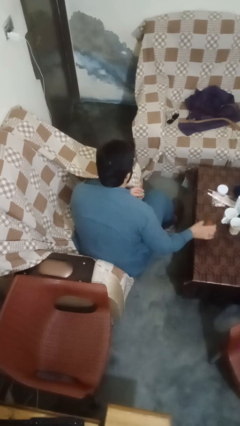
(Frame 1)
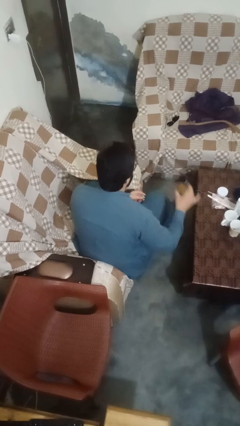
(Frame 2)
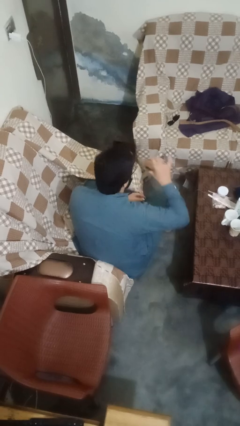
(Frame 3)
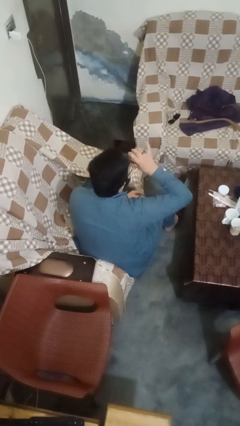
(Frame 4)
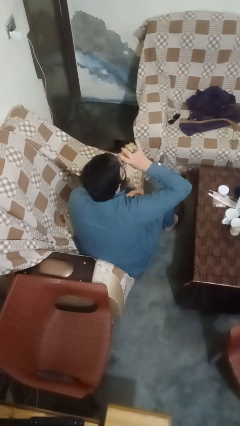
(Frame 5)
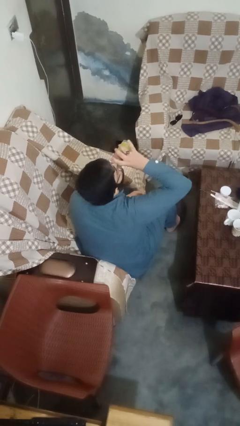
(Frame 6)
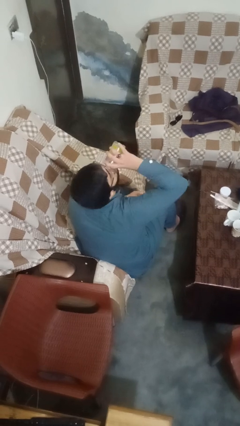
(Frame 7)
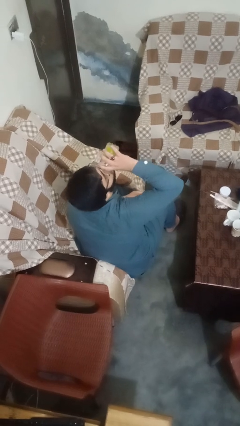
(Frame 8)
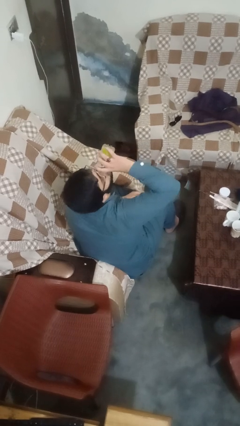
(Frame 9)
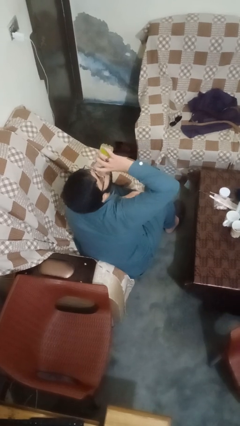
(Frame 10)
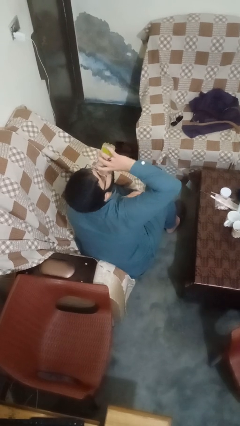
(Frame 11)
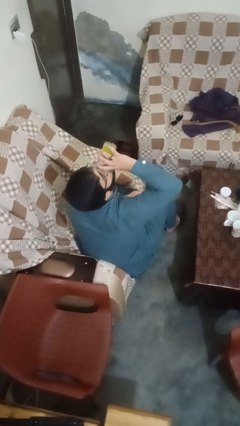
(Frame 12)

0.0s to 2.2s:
person drinks from cup

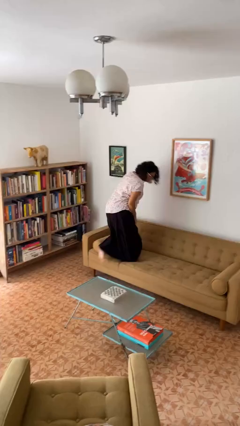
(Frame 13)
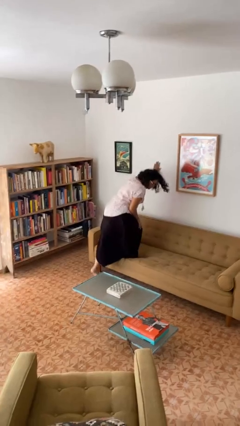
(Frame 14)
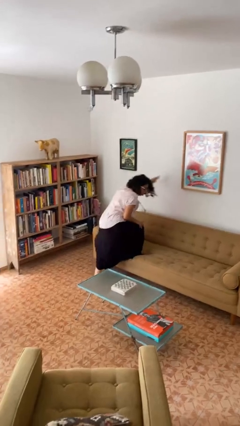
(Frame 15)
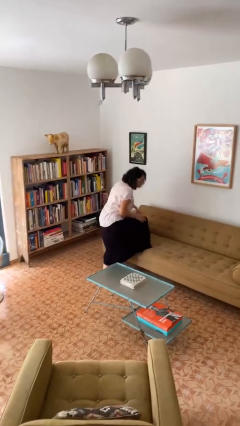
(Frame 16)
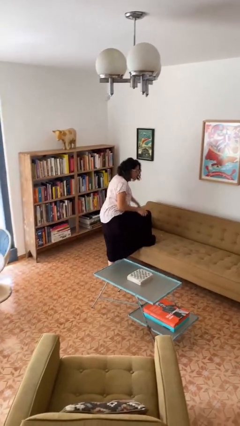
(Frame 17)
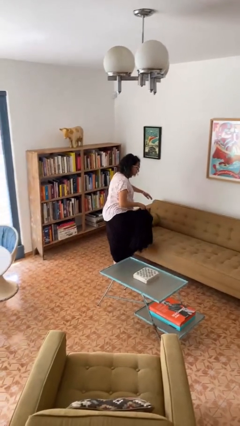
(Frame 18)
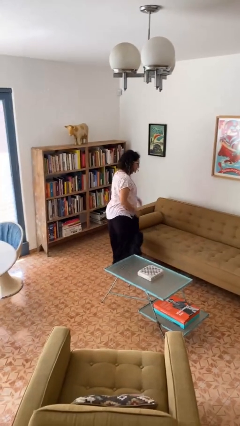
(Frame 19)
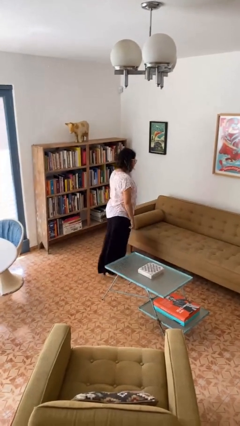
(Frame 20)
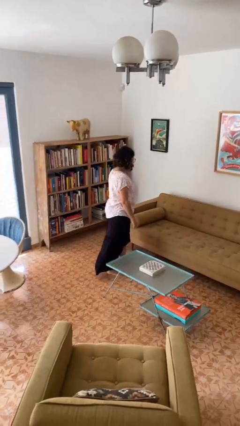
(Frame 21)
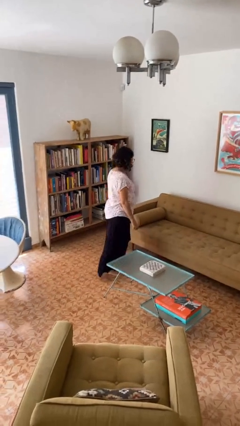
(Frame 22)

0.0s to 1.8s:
person climbs off couch

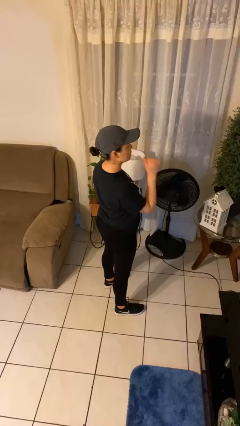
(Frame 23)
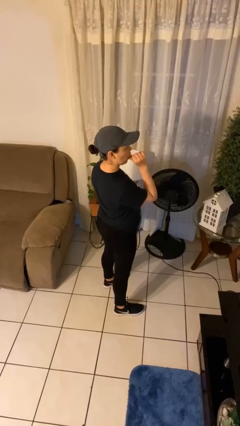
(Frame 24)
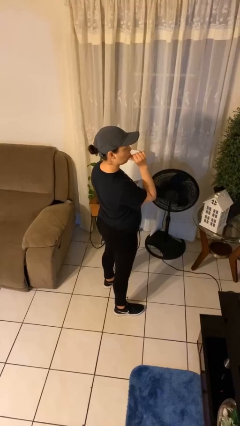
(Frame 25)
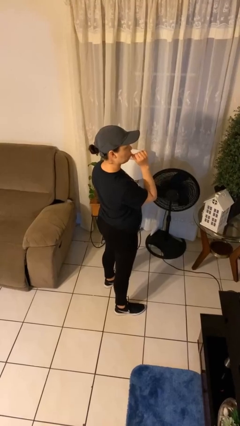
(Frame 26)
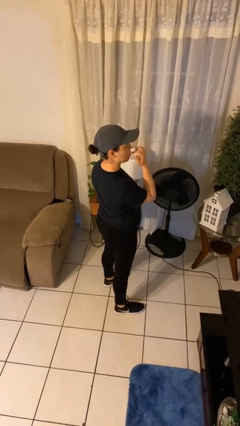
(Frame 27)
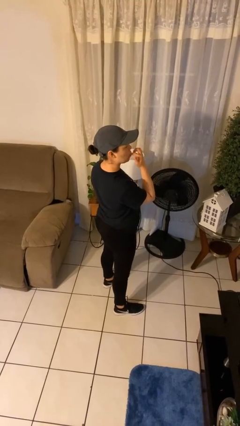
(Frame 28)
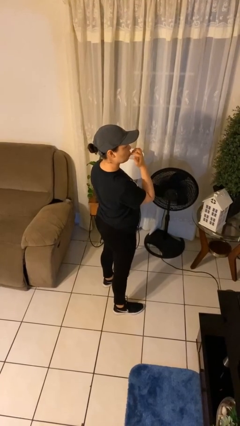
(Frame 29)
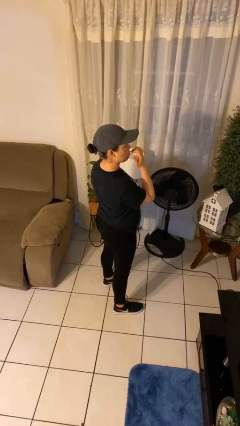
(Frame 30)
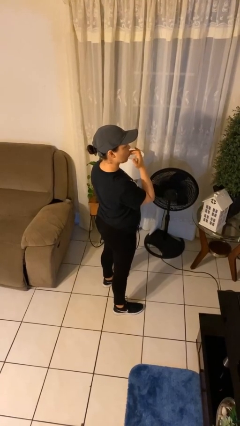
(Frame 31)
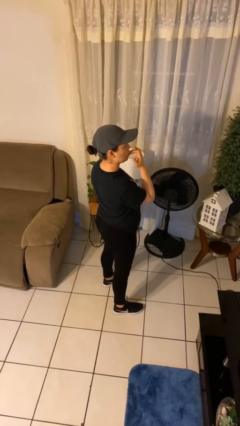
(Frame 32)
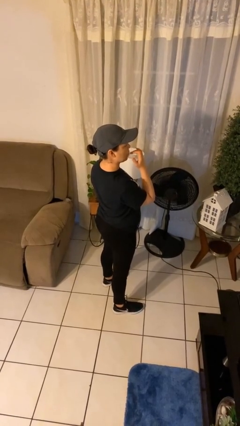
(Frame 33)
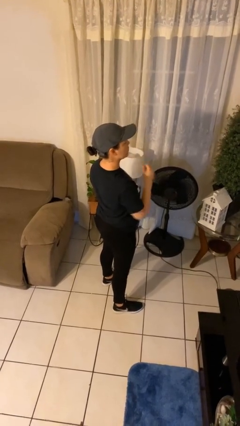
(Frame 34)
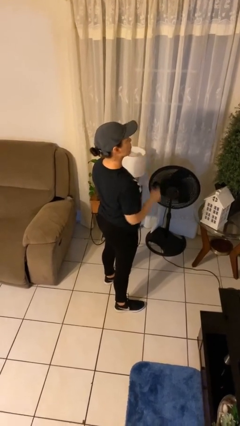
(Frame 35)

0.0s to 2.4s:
person licks fingers

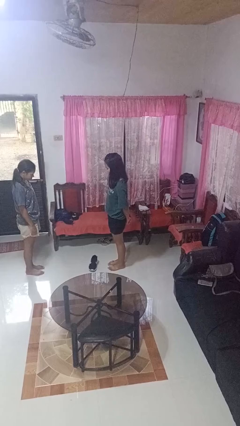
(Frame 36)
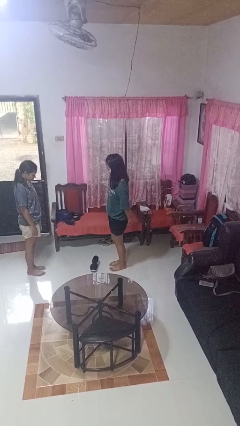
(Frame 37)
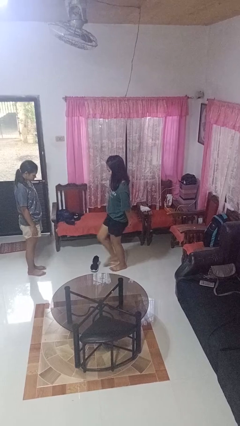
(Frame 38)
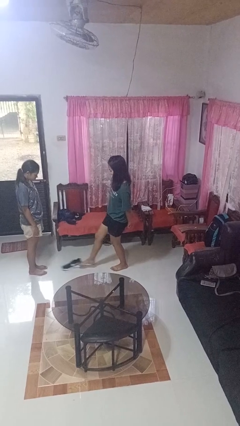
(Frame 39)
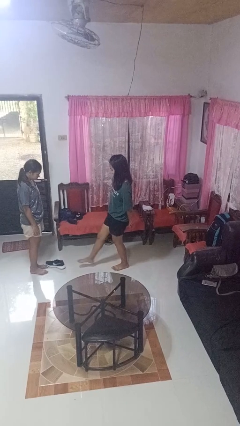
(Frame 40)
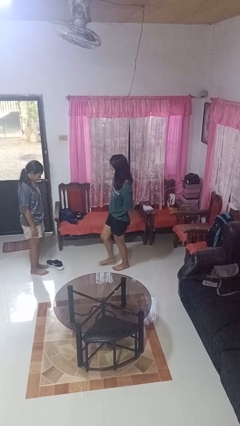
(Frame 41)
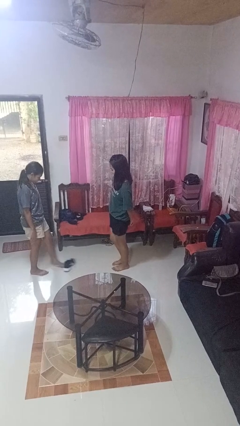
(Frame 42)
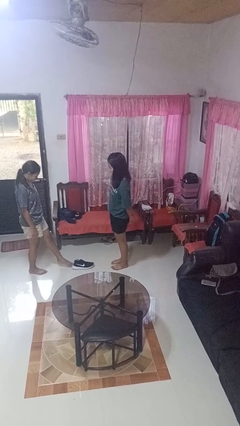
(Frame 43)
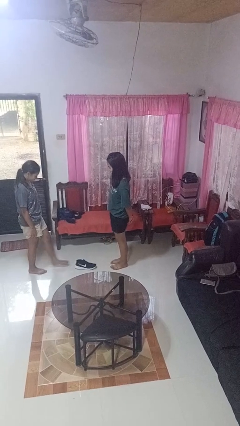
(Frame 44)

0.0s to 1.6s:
person kicks object to person

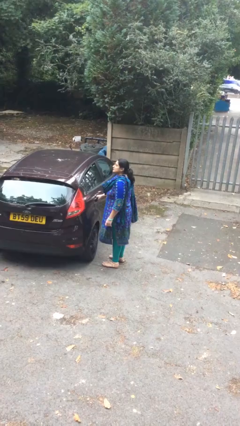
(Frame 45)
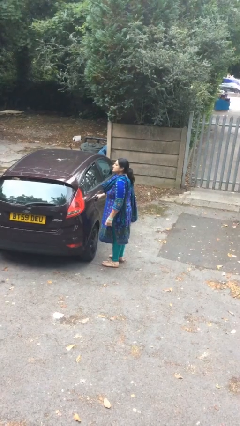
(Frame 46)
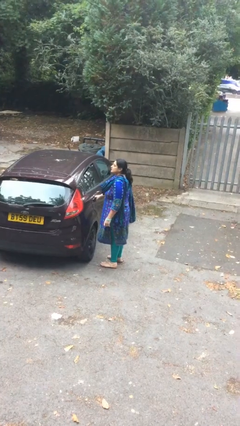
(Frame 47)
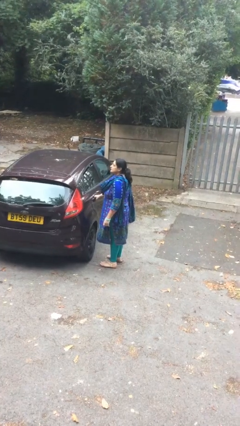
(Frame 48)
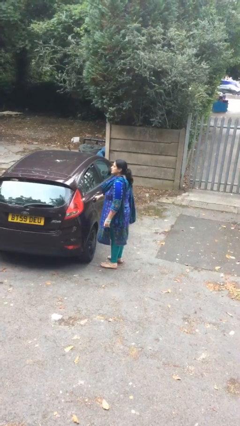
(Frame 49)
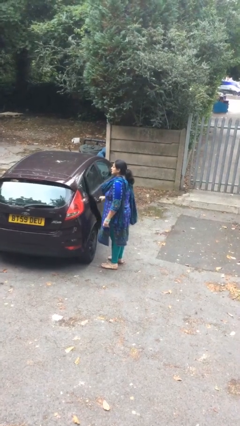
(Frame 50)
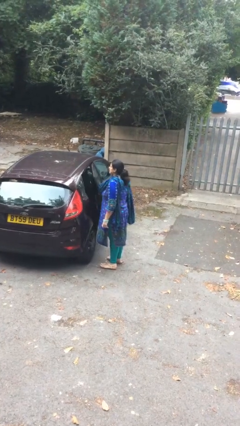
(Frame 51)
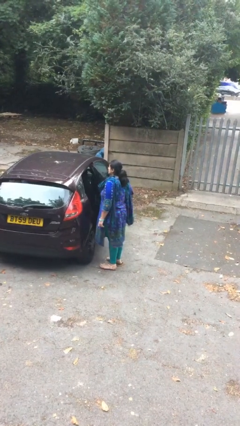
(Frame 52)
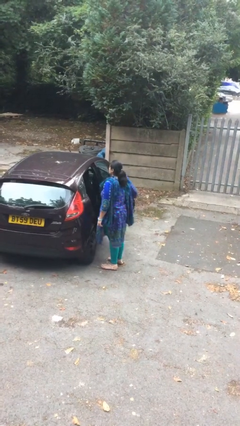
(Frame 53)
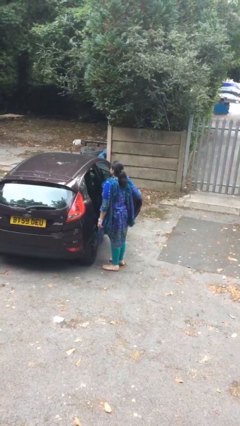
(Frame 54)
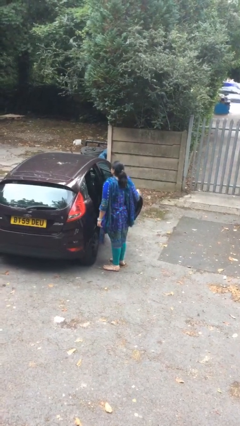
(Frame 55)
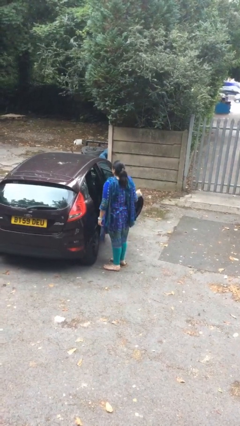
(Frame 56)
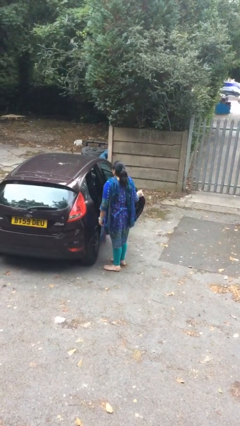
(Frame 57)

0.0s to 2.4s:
person opens car door

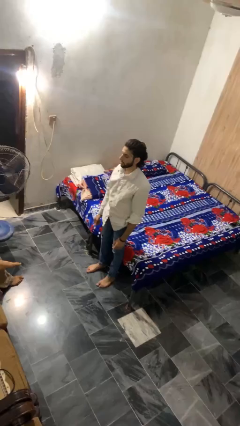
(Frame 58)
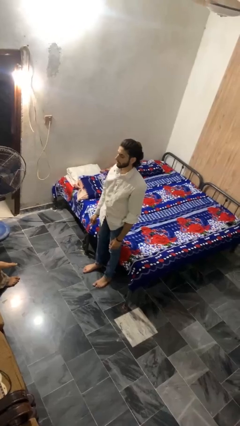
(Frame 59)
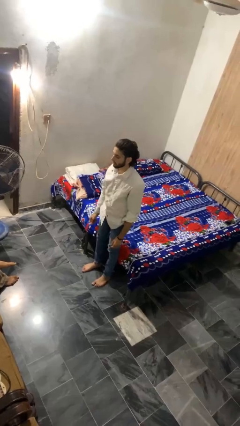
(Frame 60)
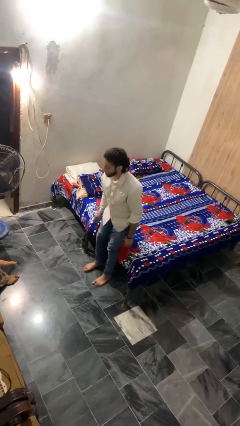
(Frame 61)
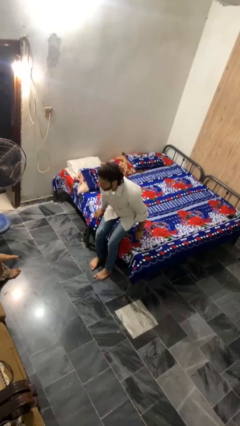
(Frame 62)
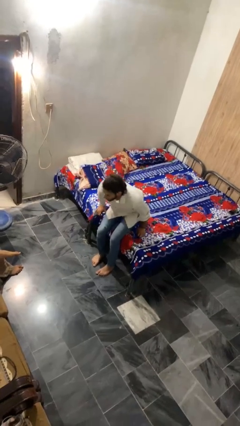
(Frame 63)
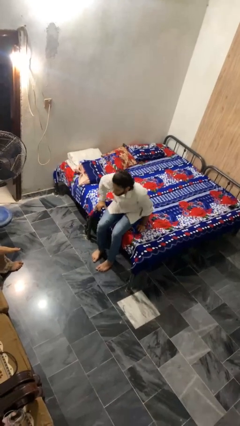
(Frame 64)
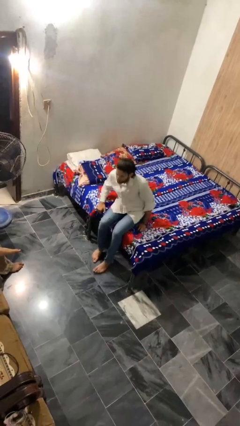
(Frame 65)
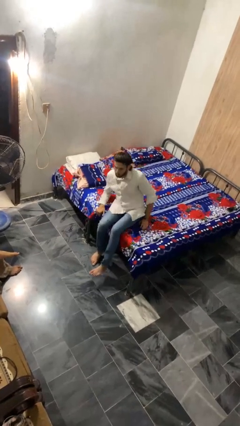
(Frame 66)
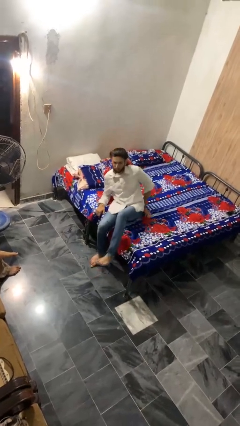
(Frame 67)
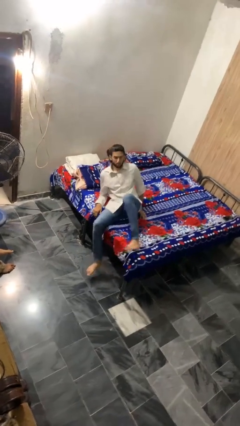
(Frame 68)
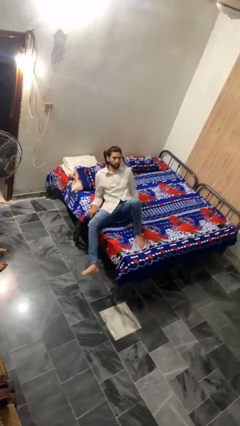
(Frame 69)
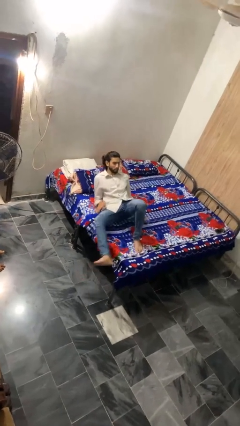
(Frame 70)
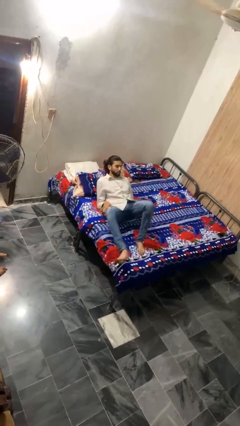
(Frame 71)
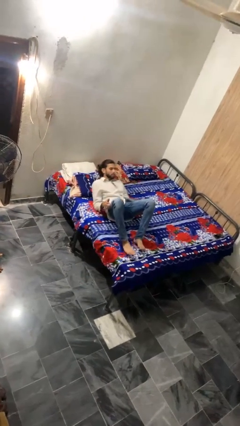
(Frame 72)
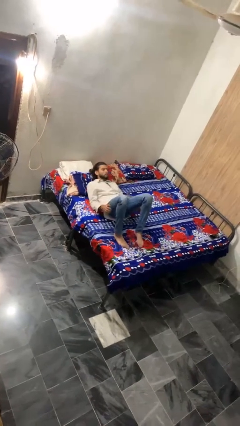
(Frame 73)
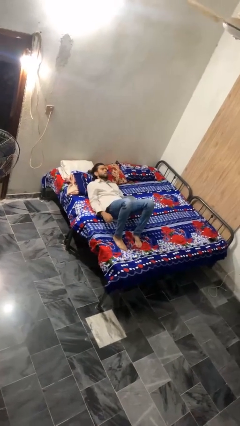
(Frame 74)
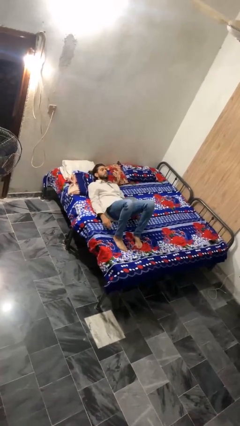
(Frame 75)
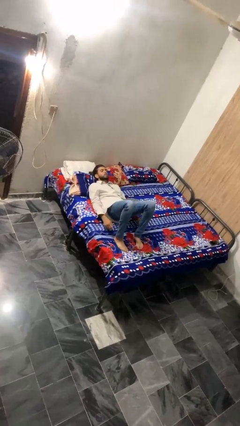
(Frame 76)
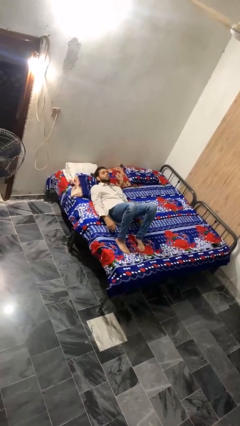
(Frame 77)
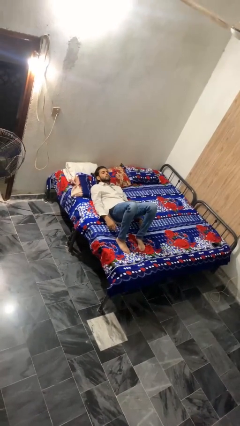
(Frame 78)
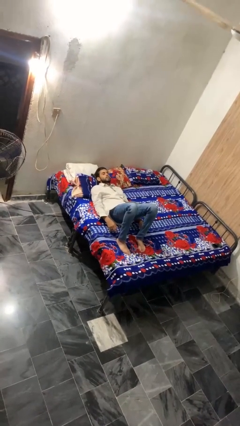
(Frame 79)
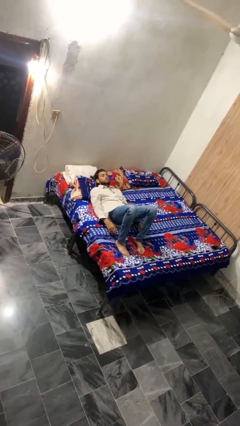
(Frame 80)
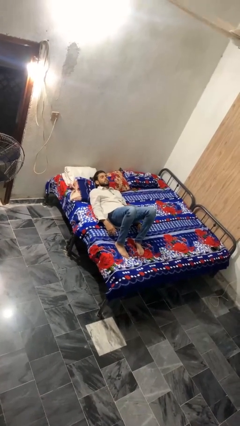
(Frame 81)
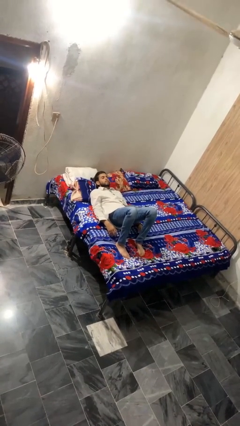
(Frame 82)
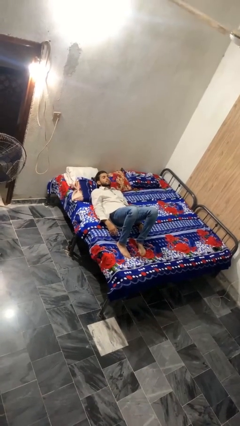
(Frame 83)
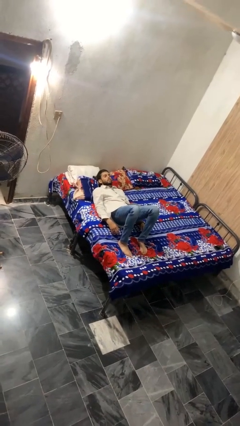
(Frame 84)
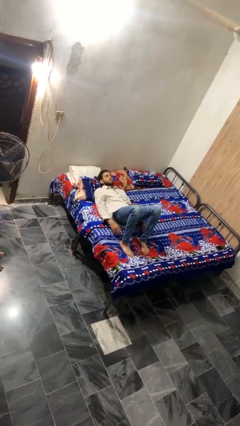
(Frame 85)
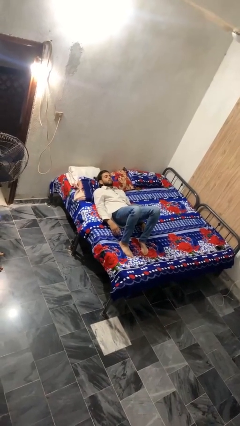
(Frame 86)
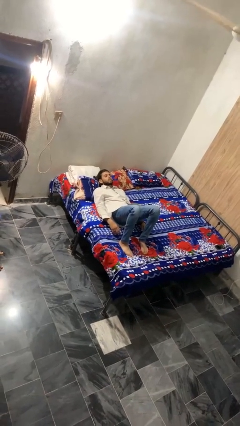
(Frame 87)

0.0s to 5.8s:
person lies down on bed

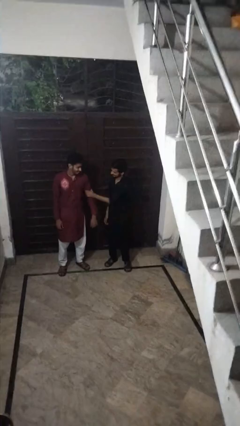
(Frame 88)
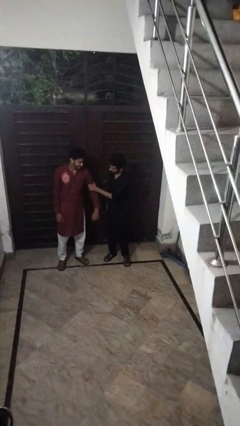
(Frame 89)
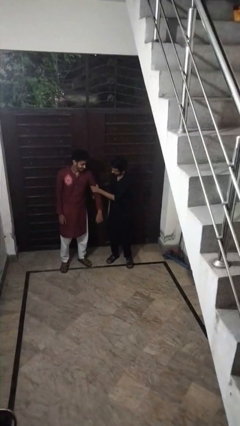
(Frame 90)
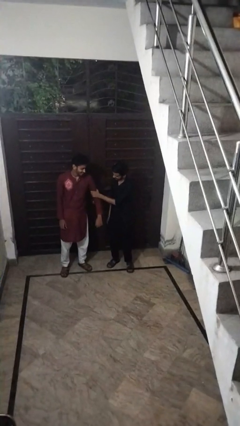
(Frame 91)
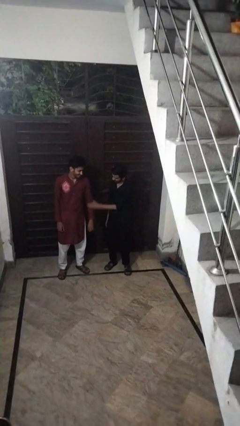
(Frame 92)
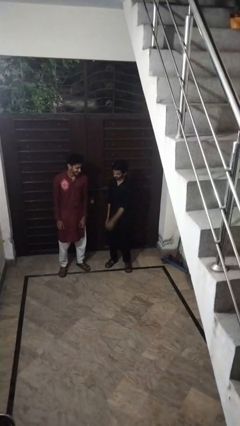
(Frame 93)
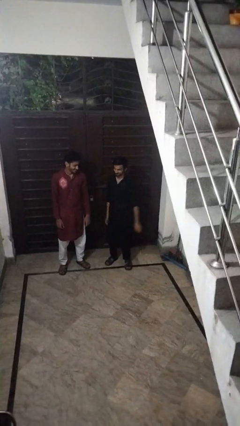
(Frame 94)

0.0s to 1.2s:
person grabs person by bicep
